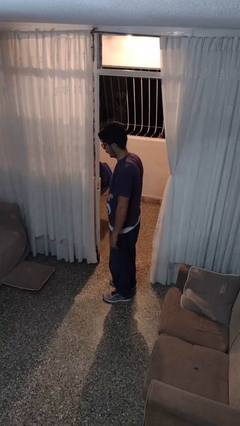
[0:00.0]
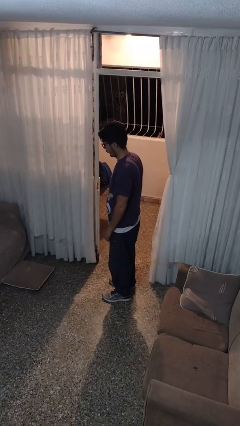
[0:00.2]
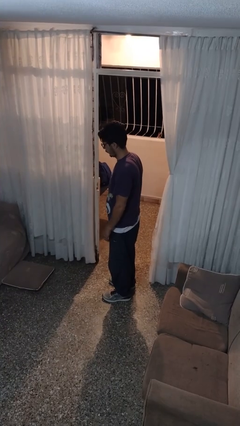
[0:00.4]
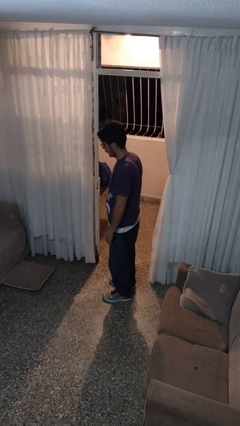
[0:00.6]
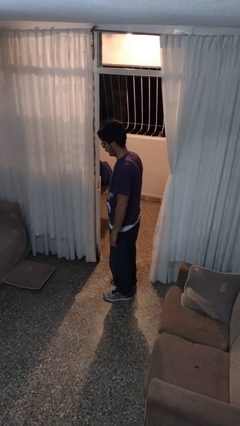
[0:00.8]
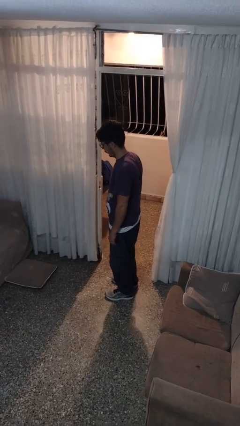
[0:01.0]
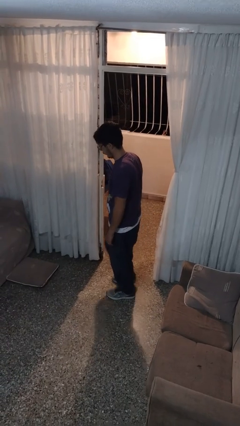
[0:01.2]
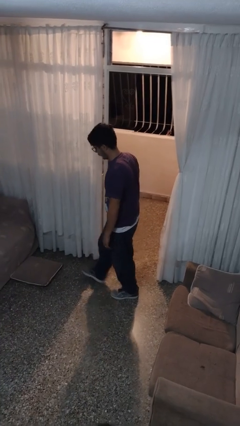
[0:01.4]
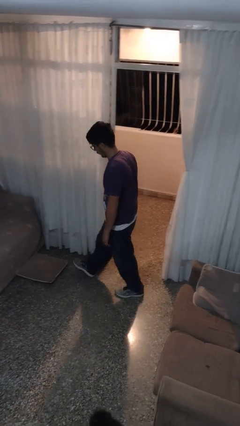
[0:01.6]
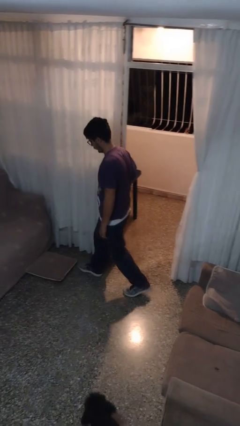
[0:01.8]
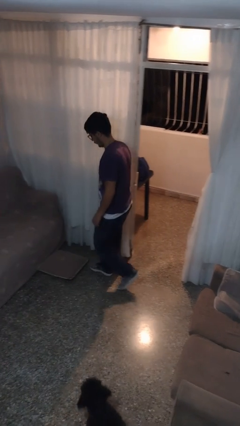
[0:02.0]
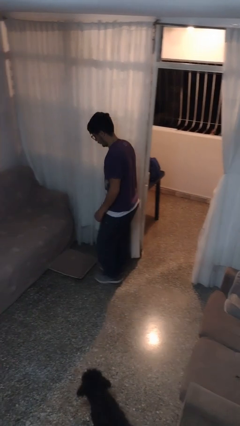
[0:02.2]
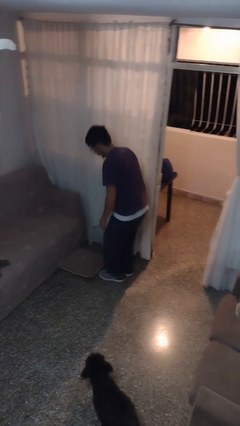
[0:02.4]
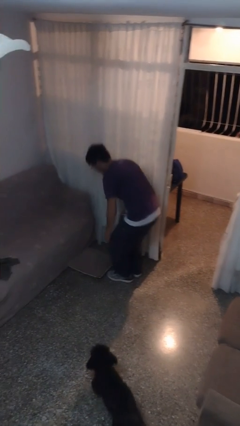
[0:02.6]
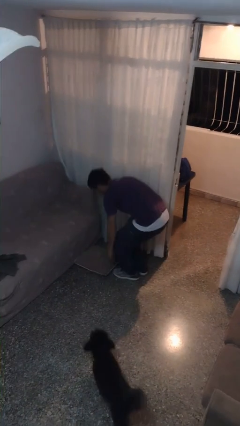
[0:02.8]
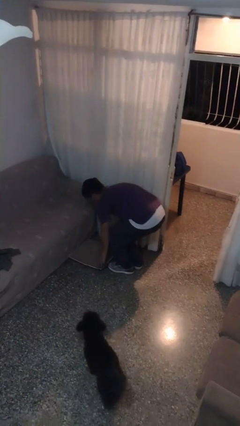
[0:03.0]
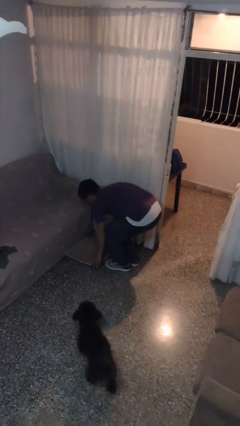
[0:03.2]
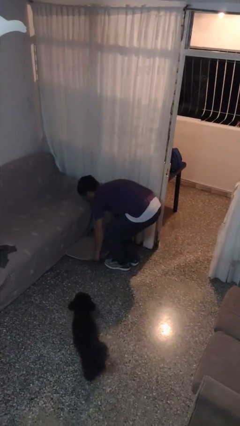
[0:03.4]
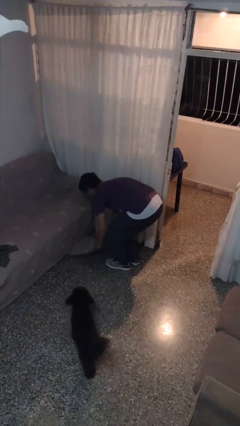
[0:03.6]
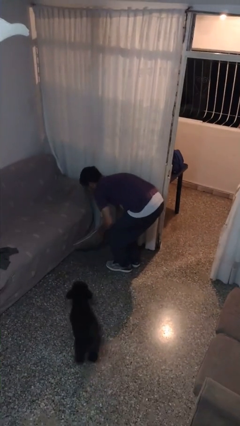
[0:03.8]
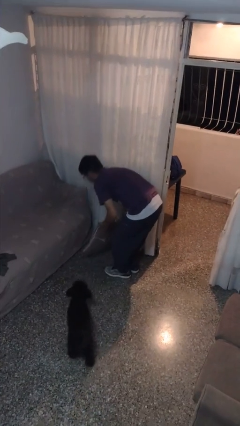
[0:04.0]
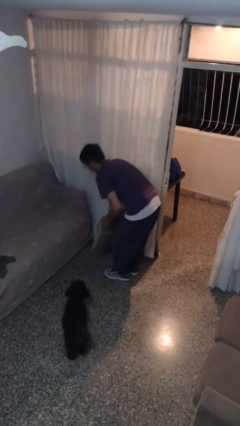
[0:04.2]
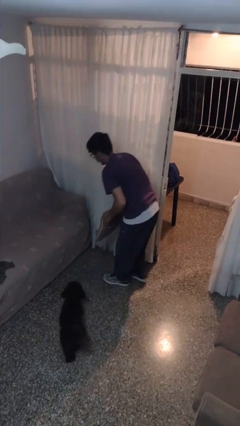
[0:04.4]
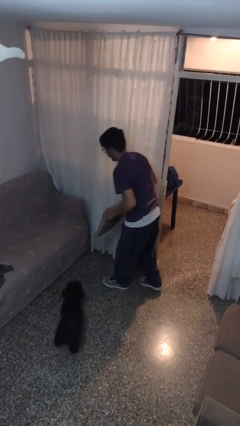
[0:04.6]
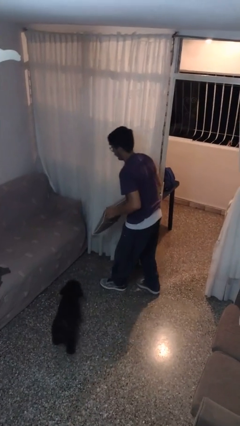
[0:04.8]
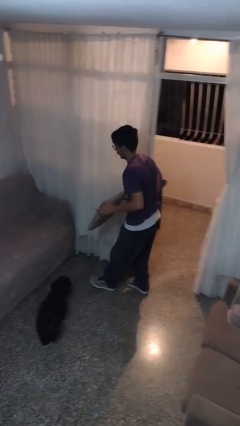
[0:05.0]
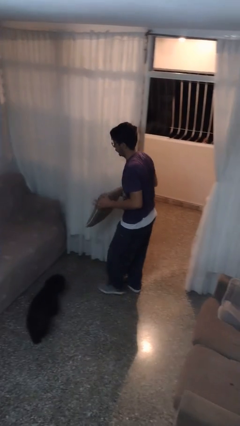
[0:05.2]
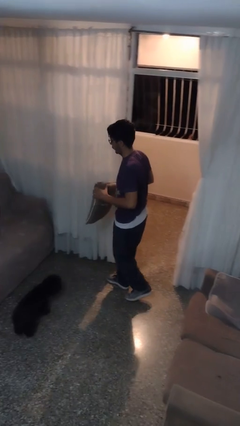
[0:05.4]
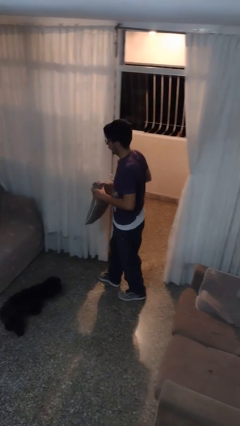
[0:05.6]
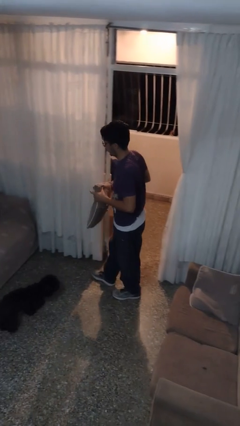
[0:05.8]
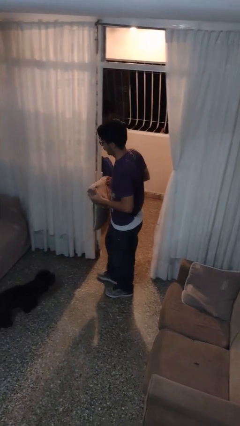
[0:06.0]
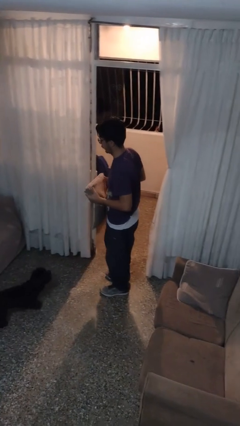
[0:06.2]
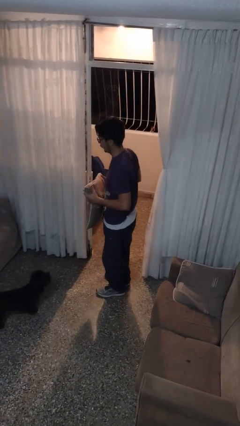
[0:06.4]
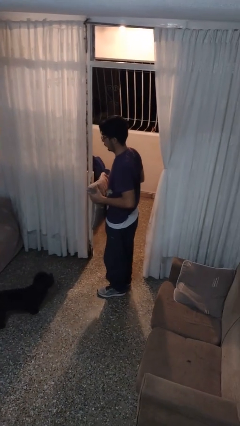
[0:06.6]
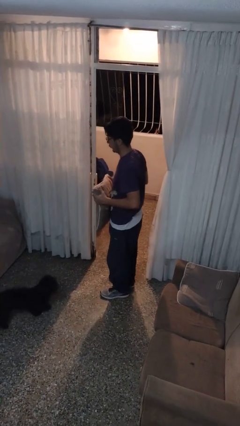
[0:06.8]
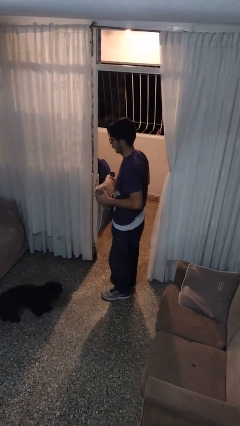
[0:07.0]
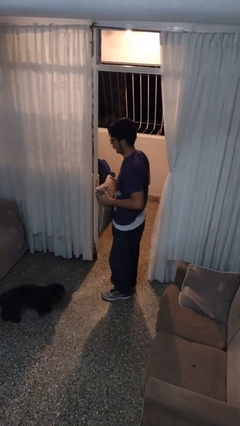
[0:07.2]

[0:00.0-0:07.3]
person picks up object from floor

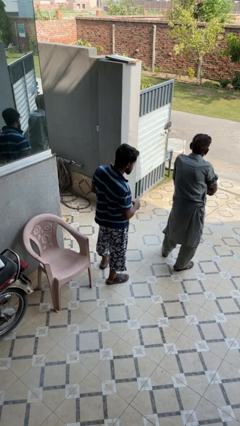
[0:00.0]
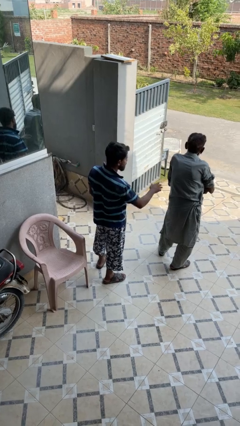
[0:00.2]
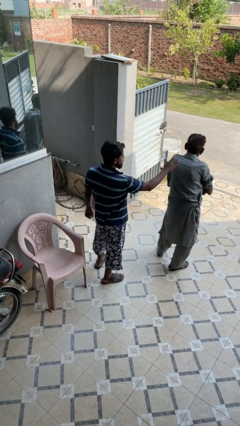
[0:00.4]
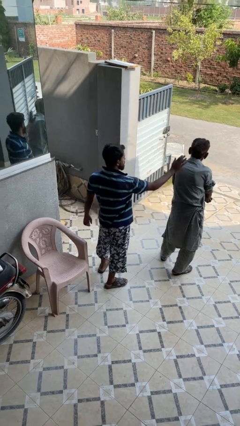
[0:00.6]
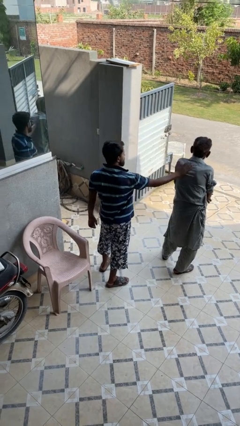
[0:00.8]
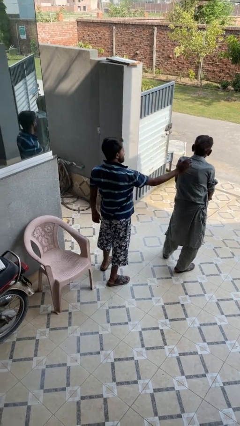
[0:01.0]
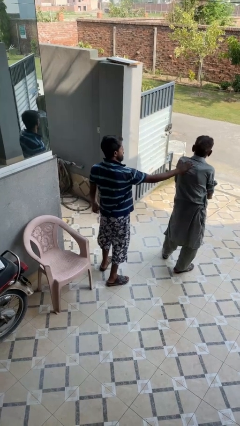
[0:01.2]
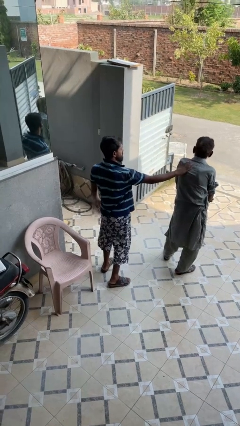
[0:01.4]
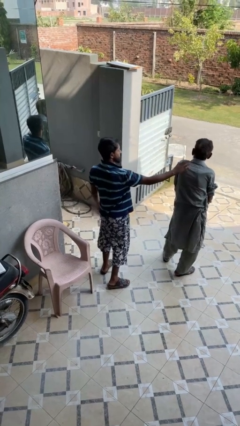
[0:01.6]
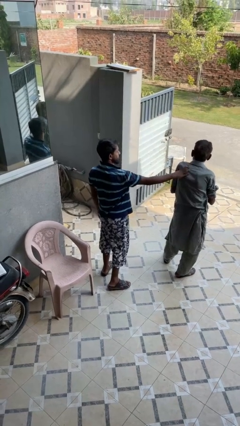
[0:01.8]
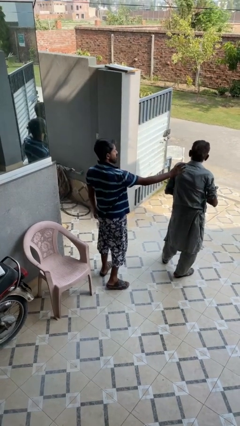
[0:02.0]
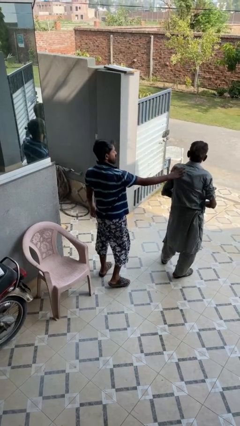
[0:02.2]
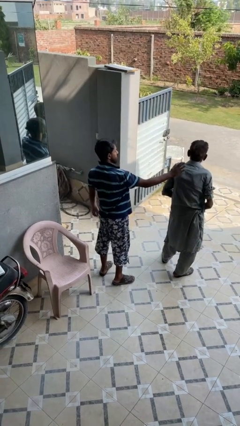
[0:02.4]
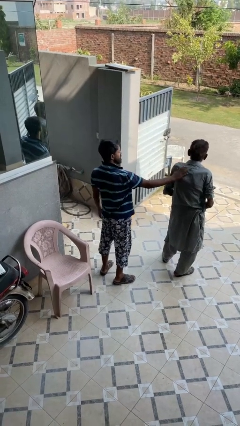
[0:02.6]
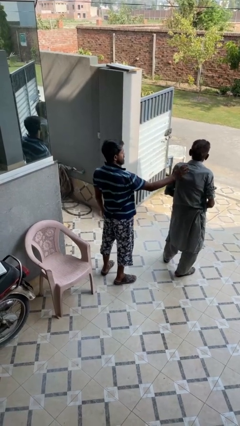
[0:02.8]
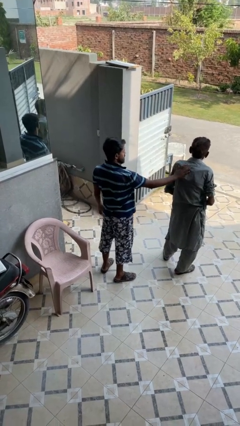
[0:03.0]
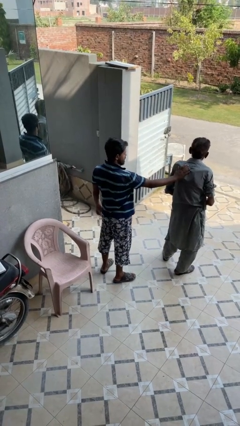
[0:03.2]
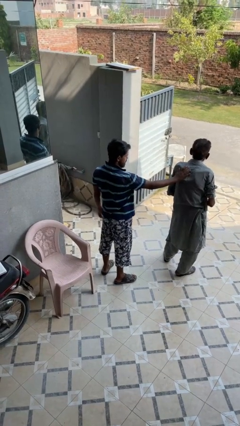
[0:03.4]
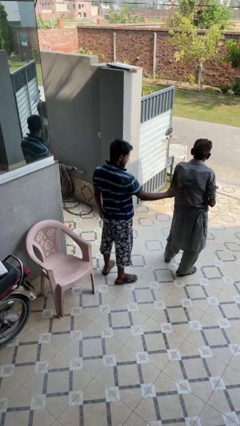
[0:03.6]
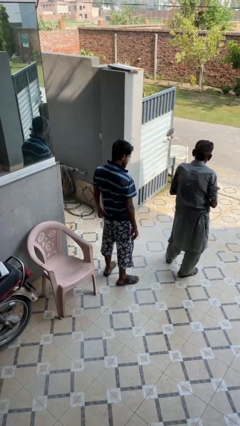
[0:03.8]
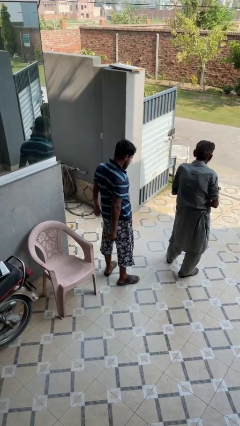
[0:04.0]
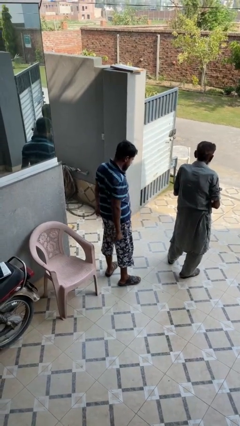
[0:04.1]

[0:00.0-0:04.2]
person touches back of person

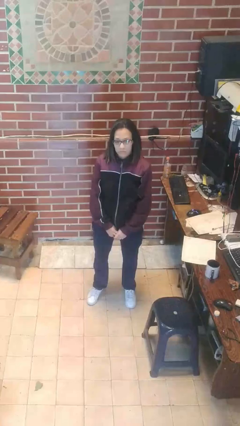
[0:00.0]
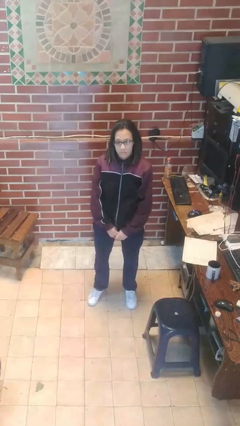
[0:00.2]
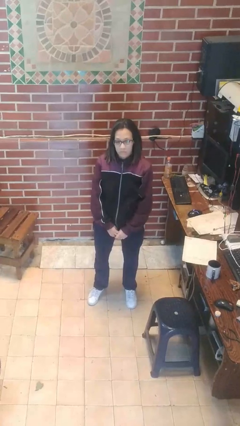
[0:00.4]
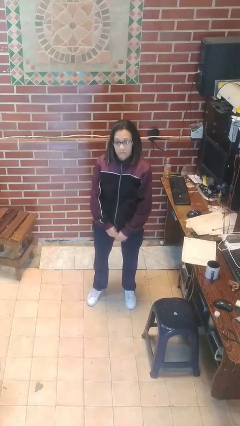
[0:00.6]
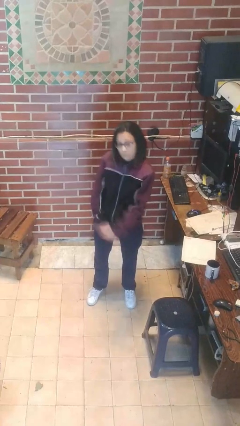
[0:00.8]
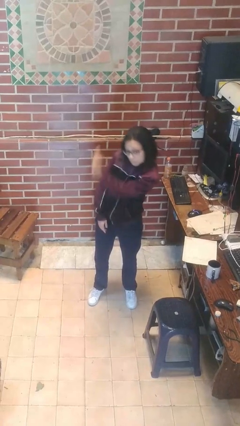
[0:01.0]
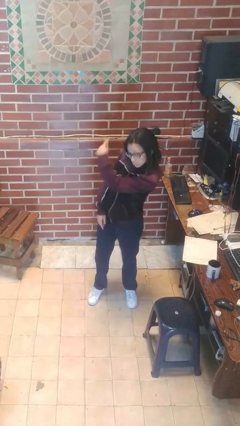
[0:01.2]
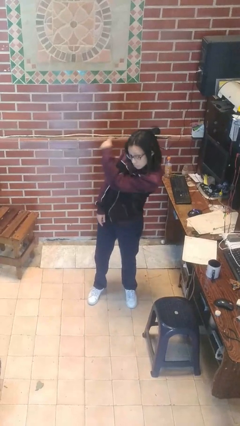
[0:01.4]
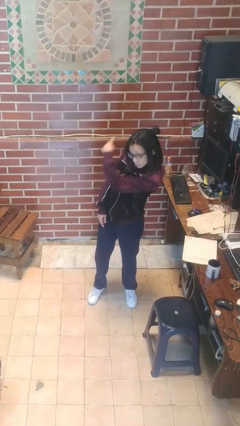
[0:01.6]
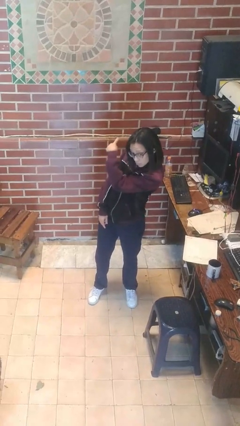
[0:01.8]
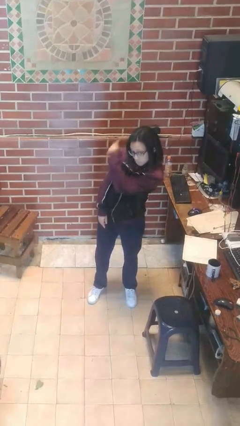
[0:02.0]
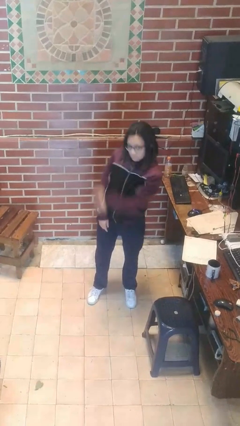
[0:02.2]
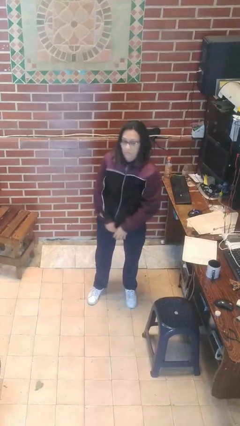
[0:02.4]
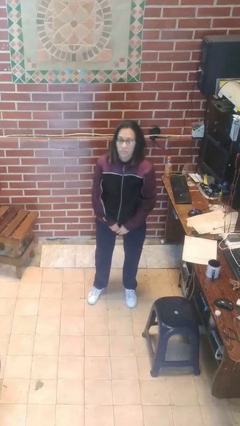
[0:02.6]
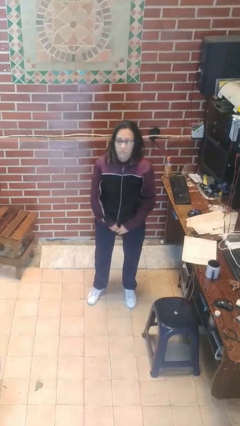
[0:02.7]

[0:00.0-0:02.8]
person gestures behind me

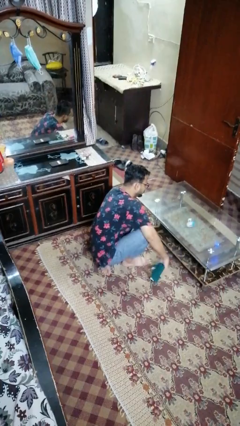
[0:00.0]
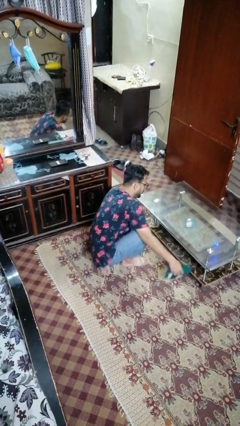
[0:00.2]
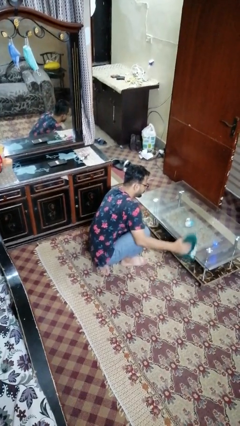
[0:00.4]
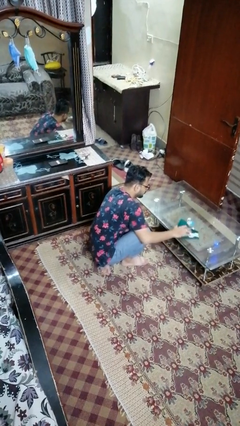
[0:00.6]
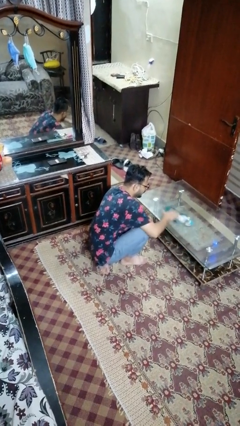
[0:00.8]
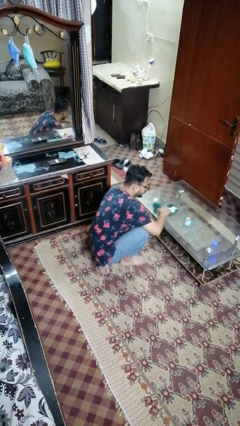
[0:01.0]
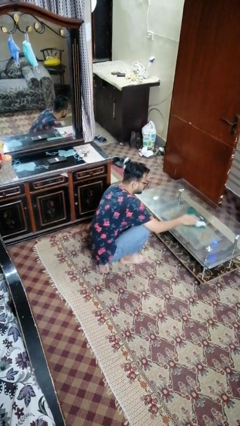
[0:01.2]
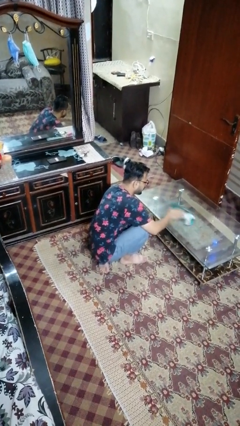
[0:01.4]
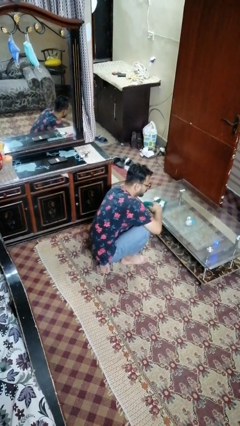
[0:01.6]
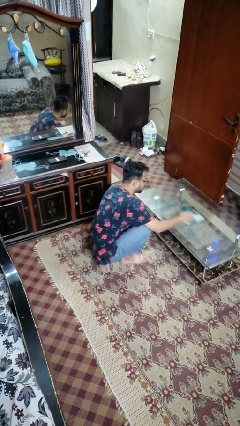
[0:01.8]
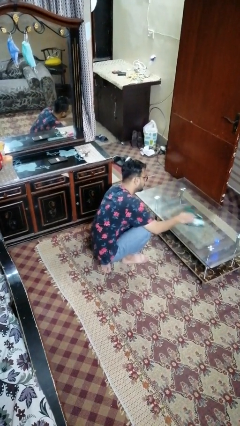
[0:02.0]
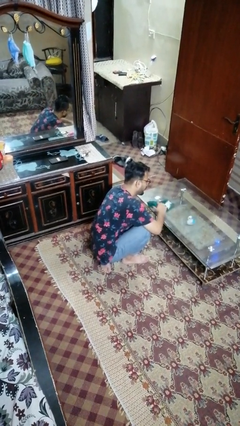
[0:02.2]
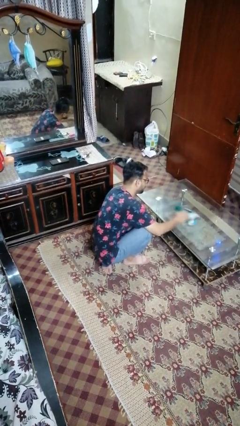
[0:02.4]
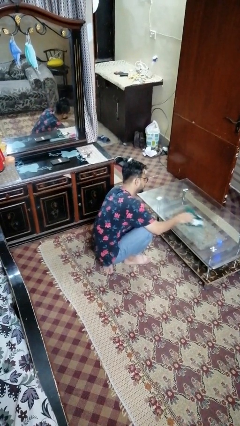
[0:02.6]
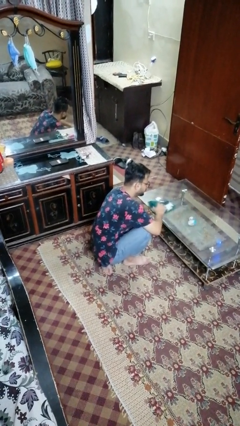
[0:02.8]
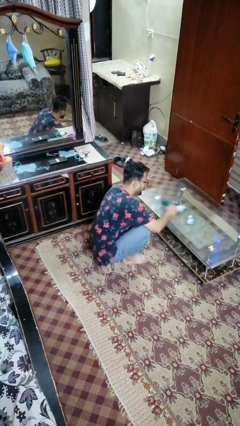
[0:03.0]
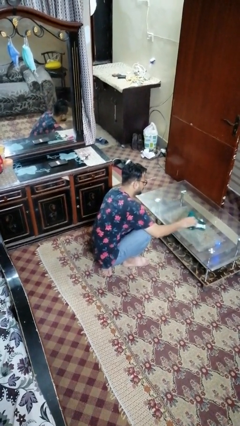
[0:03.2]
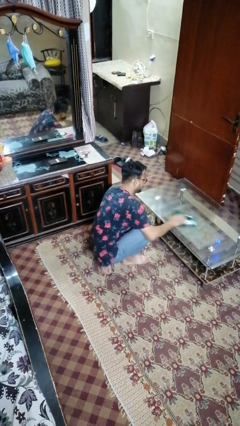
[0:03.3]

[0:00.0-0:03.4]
person cleans table with rag

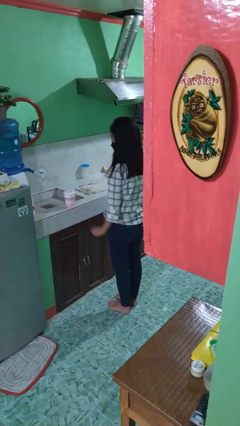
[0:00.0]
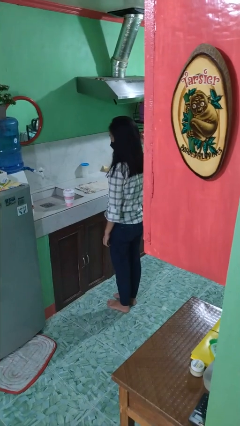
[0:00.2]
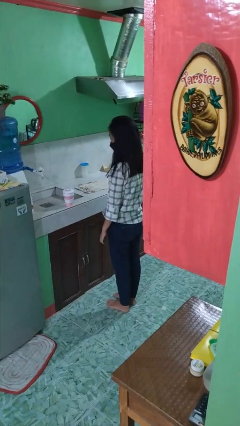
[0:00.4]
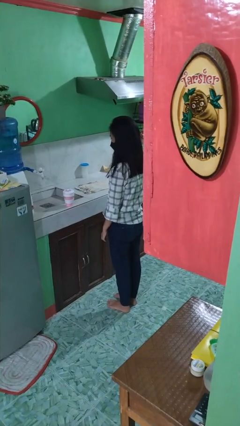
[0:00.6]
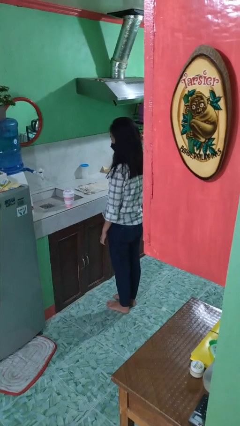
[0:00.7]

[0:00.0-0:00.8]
person picks up object from countertop
